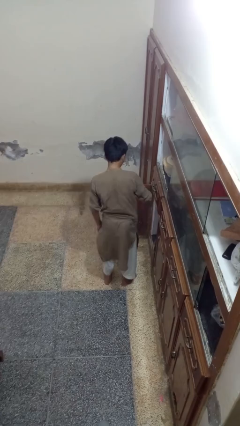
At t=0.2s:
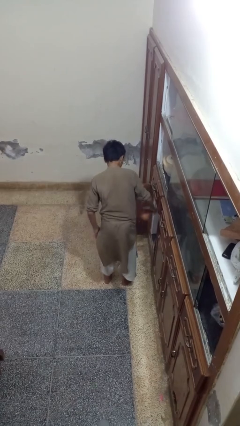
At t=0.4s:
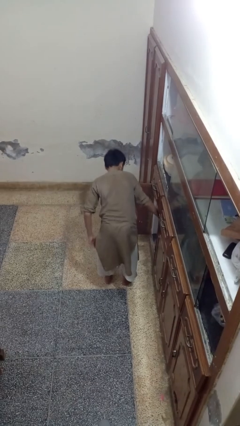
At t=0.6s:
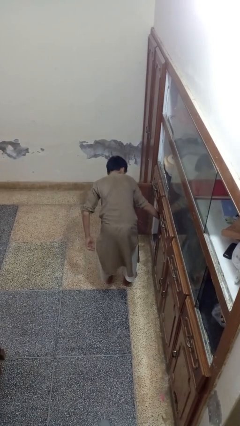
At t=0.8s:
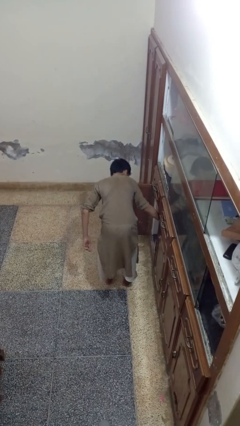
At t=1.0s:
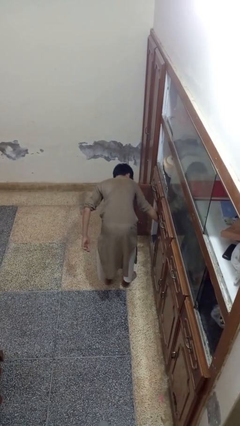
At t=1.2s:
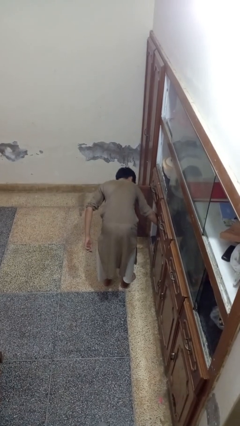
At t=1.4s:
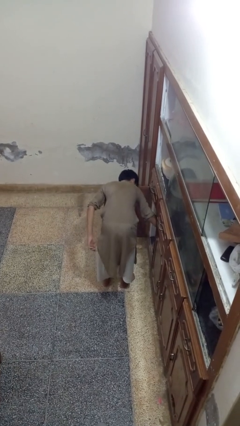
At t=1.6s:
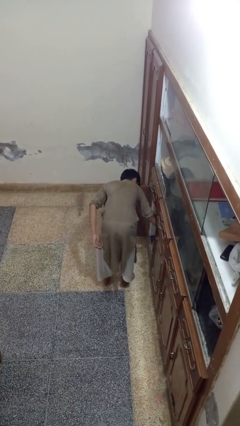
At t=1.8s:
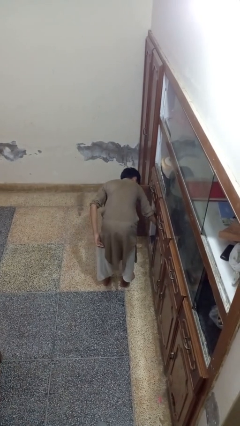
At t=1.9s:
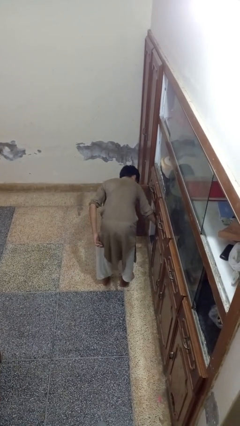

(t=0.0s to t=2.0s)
person puts object in cabinet

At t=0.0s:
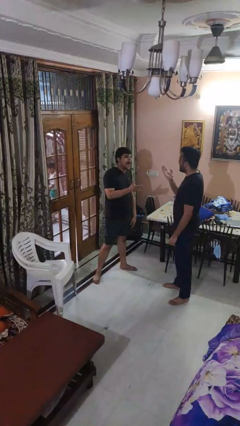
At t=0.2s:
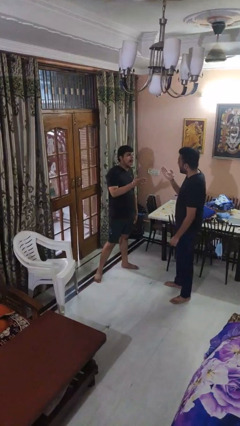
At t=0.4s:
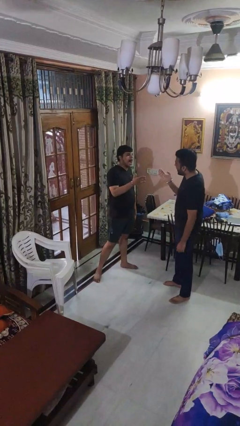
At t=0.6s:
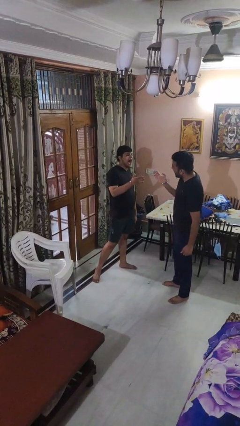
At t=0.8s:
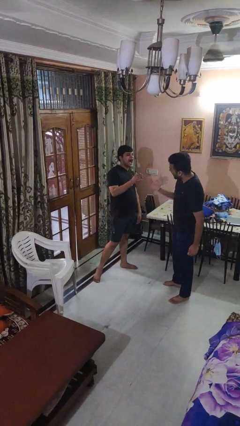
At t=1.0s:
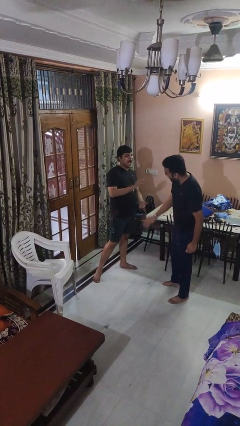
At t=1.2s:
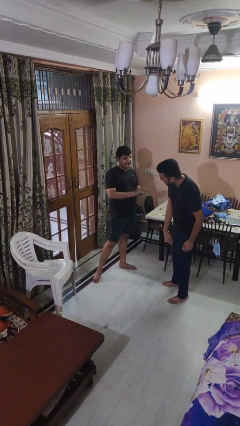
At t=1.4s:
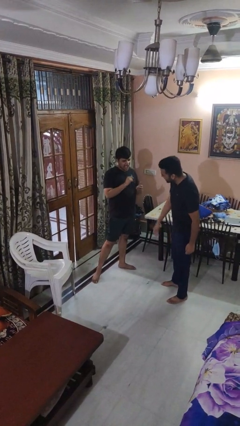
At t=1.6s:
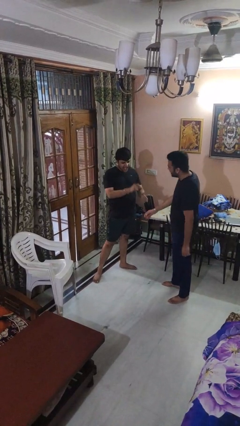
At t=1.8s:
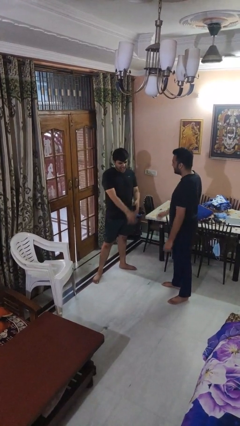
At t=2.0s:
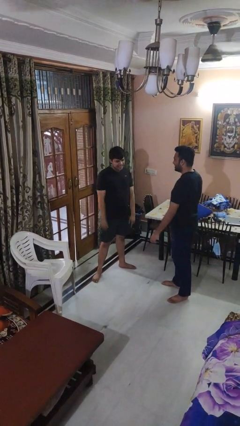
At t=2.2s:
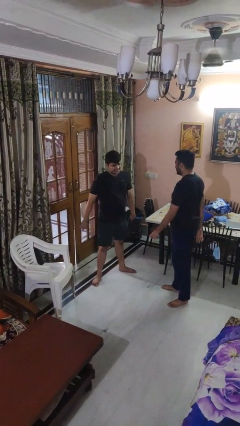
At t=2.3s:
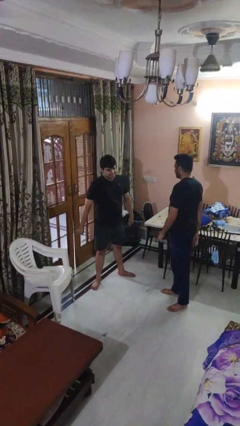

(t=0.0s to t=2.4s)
person laughs with person

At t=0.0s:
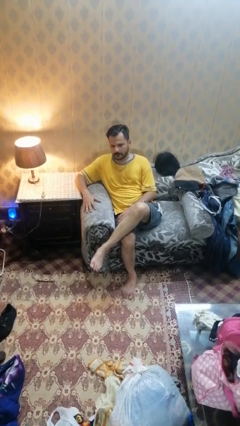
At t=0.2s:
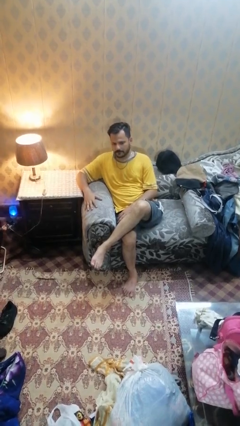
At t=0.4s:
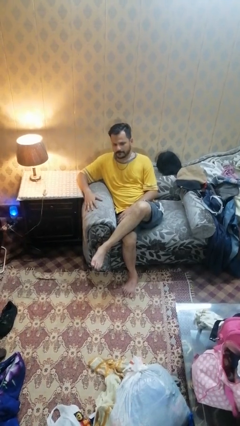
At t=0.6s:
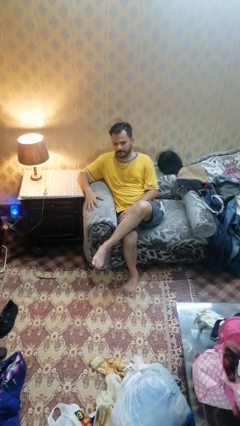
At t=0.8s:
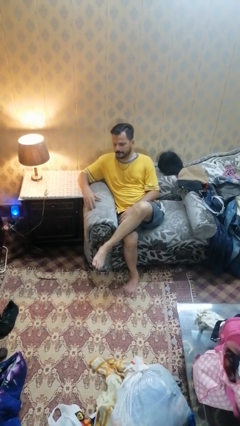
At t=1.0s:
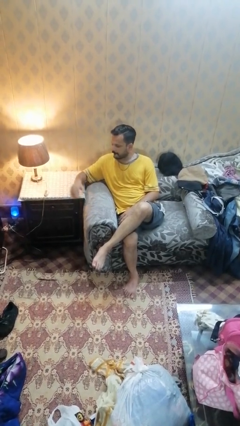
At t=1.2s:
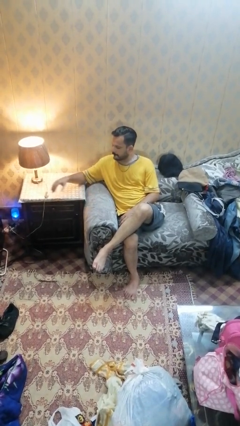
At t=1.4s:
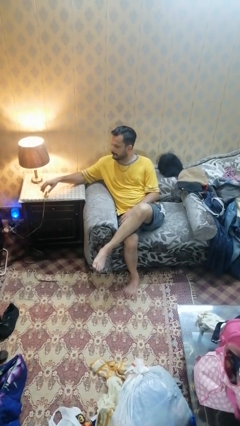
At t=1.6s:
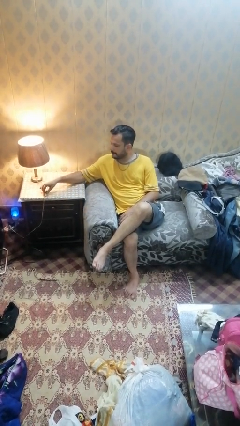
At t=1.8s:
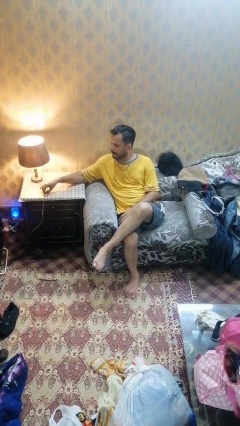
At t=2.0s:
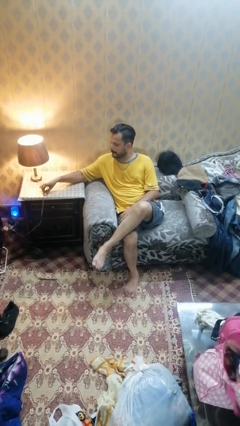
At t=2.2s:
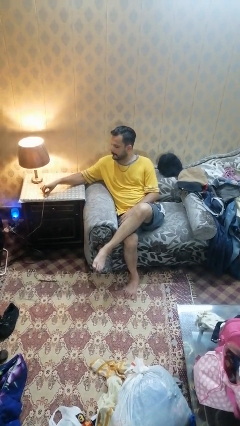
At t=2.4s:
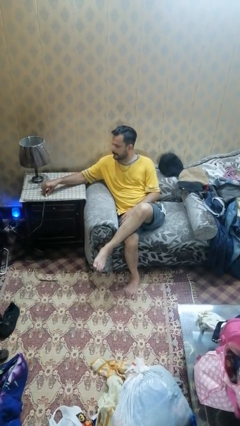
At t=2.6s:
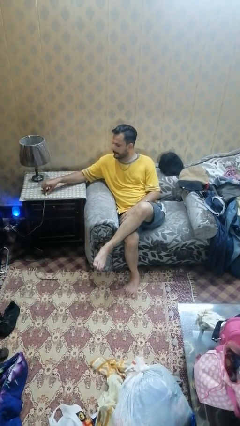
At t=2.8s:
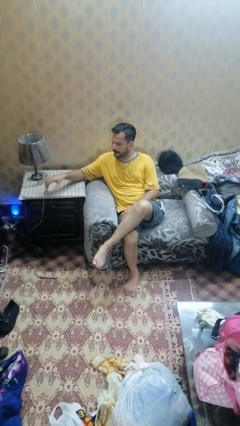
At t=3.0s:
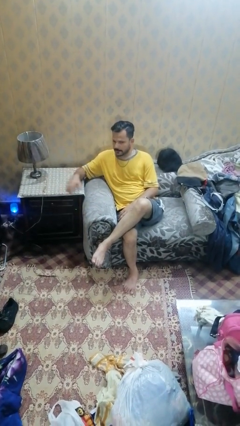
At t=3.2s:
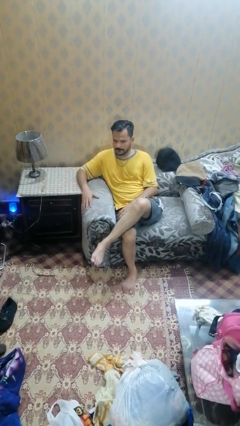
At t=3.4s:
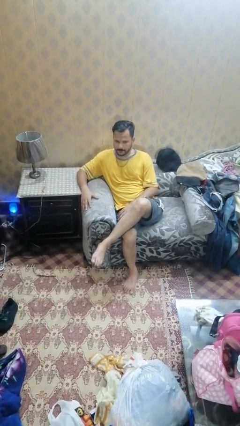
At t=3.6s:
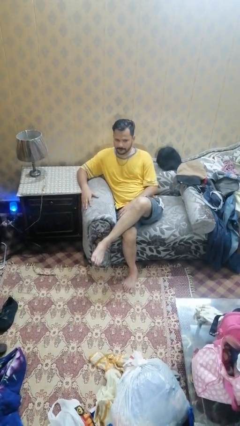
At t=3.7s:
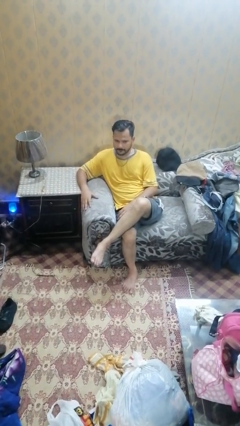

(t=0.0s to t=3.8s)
person turns off lamp

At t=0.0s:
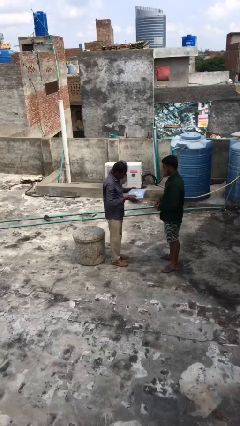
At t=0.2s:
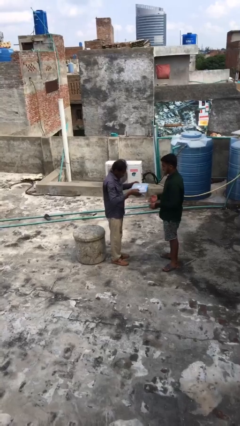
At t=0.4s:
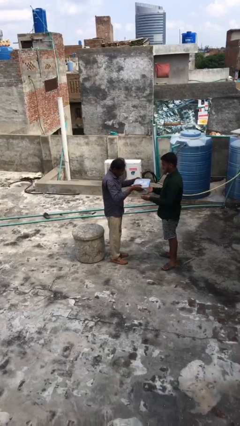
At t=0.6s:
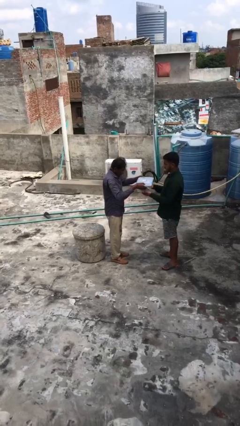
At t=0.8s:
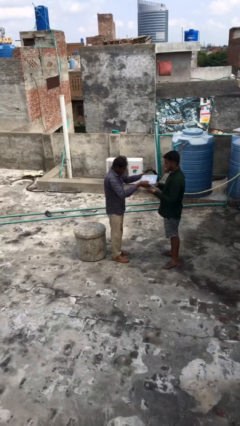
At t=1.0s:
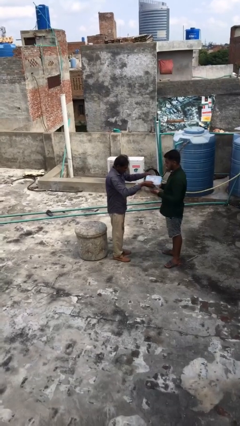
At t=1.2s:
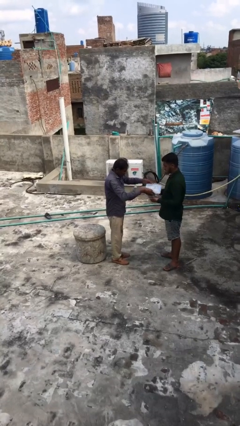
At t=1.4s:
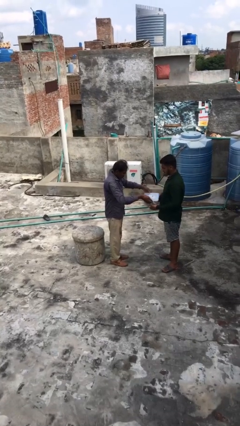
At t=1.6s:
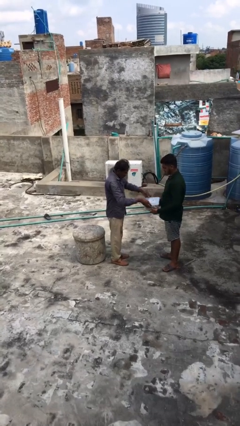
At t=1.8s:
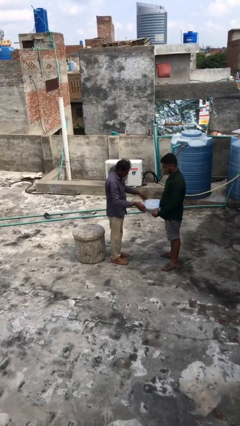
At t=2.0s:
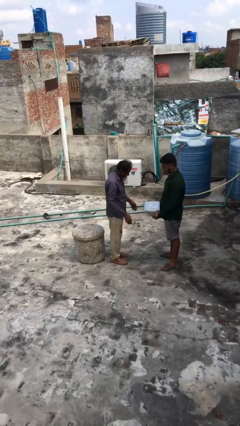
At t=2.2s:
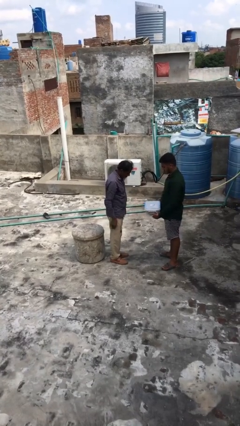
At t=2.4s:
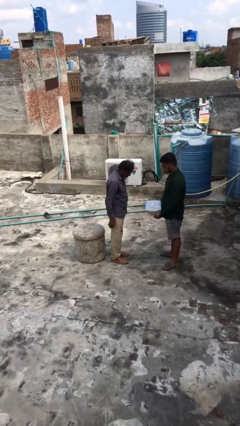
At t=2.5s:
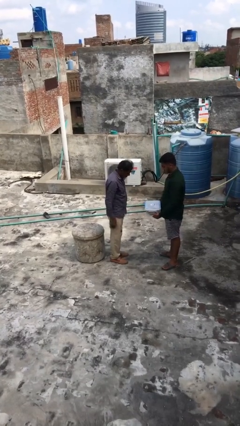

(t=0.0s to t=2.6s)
person transfers object to person

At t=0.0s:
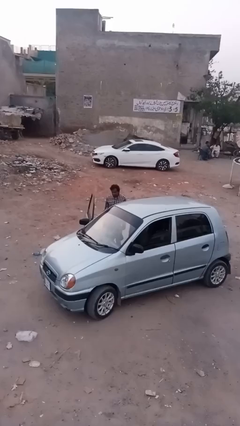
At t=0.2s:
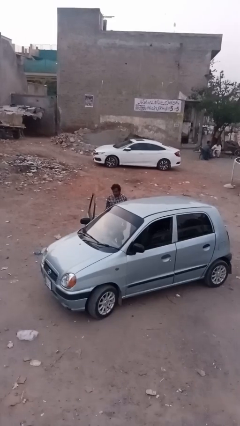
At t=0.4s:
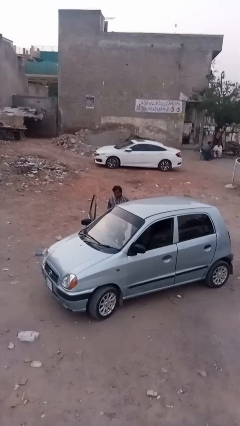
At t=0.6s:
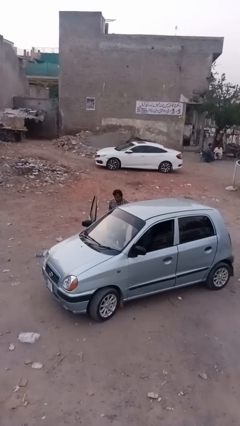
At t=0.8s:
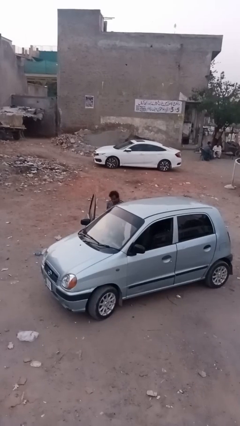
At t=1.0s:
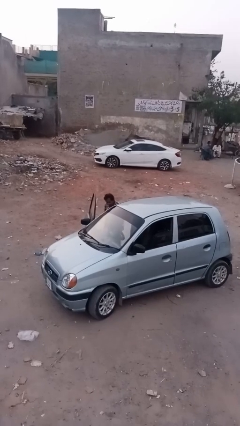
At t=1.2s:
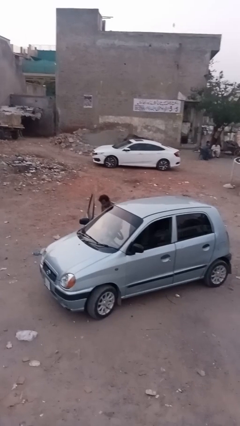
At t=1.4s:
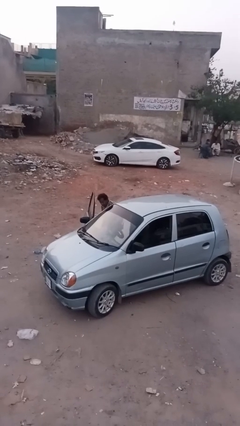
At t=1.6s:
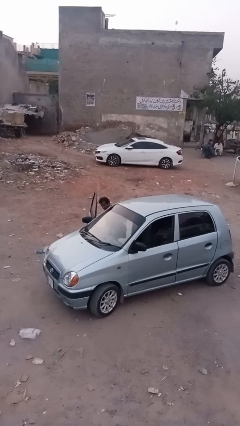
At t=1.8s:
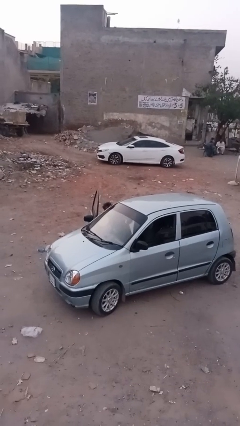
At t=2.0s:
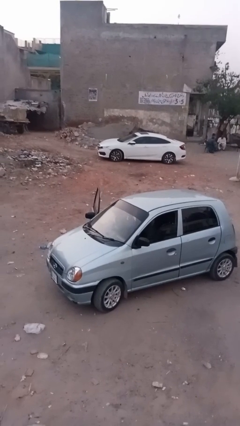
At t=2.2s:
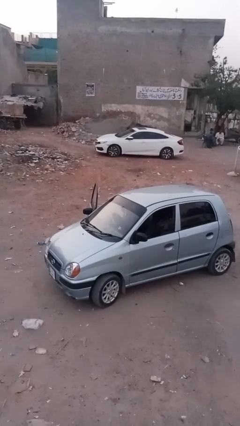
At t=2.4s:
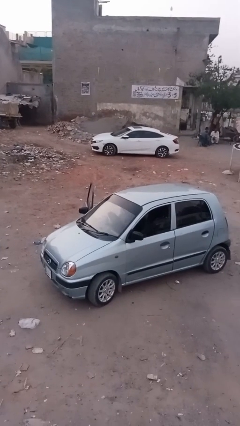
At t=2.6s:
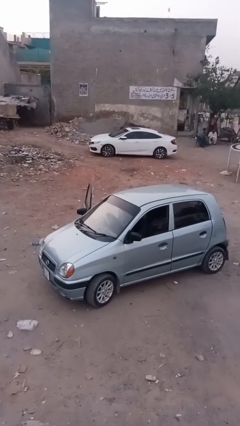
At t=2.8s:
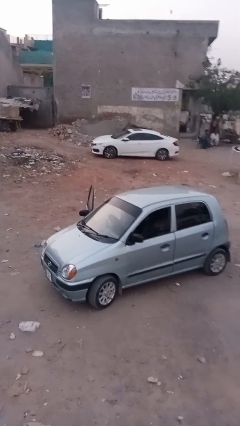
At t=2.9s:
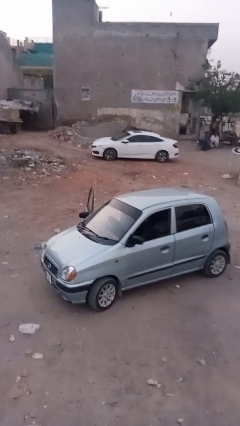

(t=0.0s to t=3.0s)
person enters car

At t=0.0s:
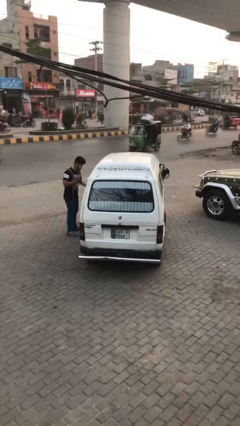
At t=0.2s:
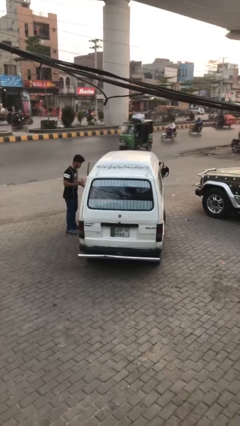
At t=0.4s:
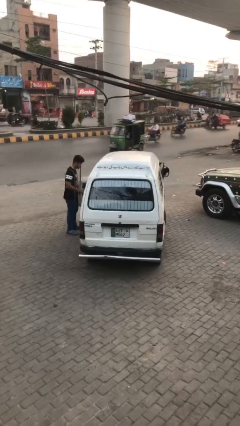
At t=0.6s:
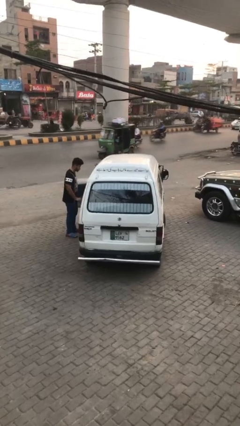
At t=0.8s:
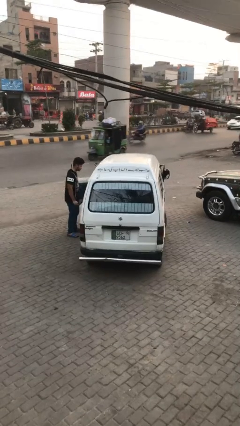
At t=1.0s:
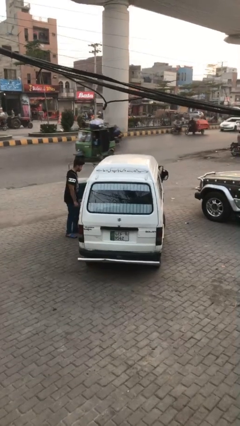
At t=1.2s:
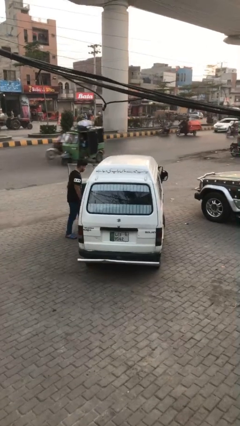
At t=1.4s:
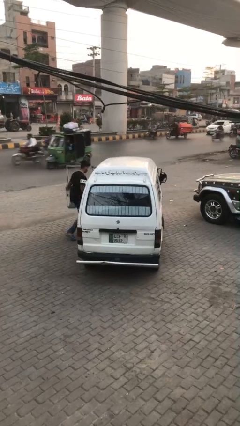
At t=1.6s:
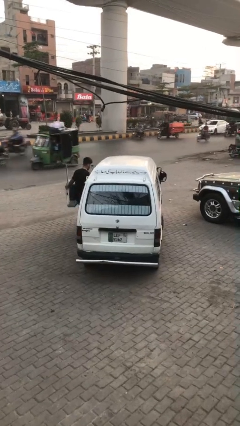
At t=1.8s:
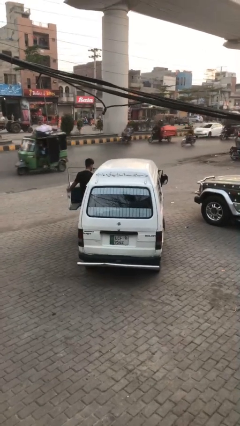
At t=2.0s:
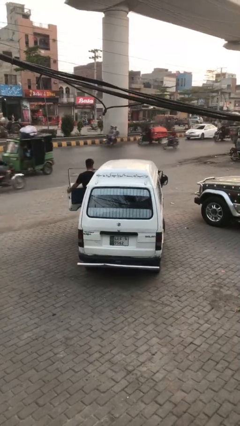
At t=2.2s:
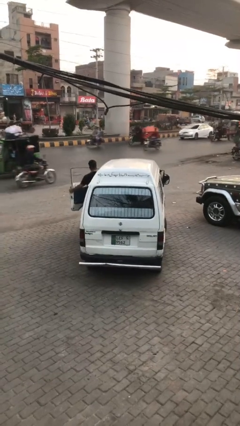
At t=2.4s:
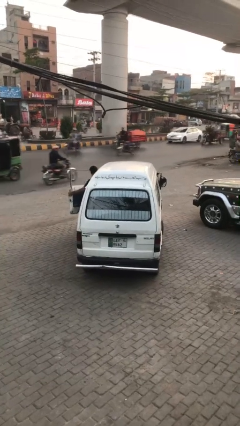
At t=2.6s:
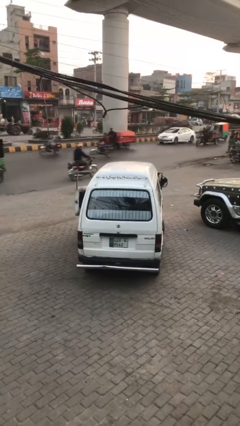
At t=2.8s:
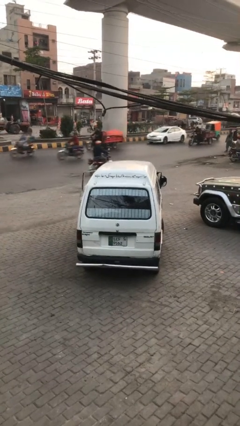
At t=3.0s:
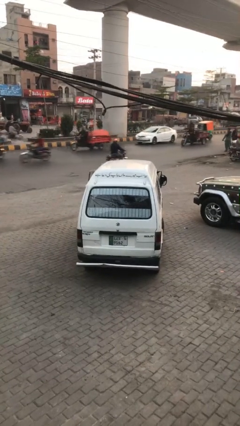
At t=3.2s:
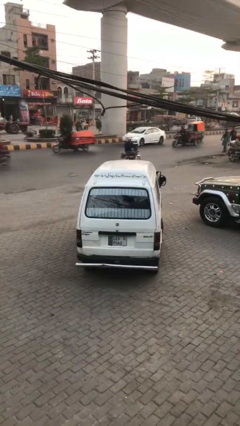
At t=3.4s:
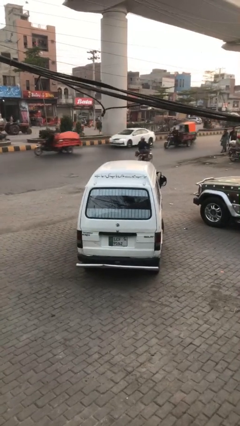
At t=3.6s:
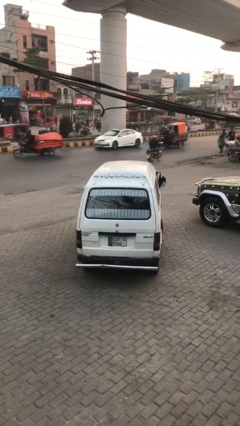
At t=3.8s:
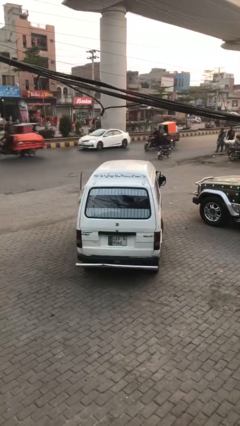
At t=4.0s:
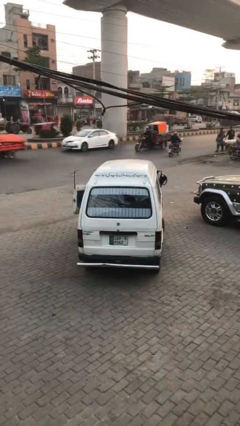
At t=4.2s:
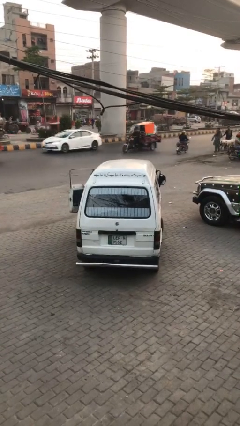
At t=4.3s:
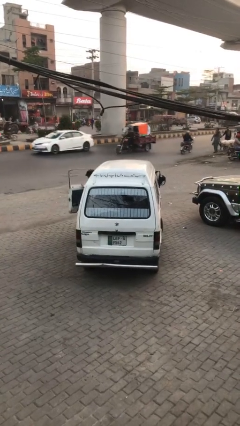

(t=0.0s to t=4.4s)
car picks up person
